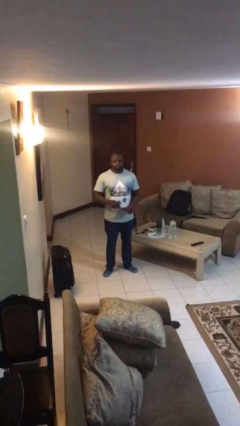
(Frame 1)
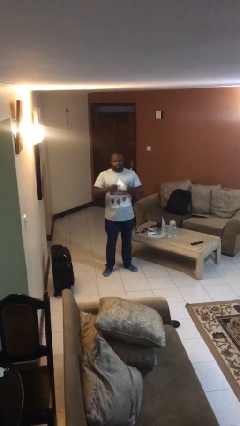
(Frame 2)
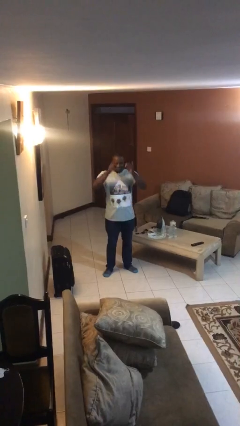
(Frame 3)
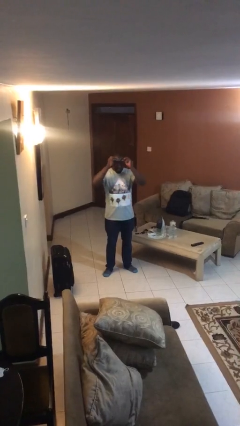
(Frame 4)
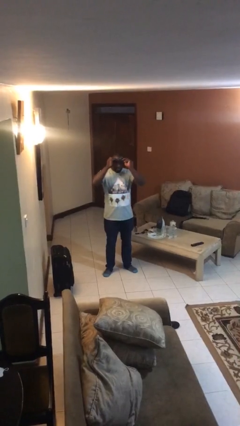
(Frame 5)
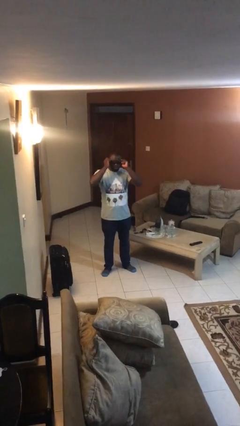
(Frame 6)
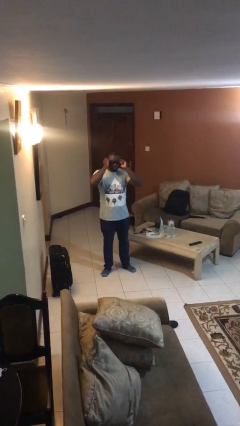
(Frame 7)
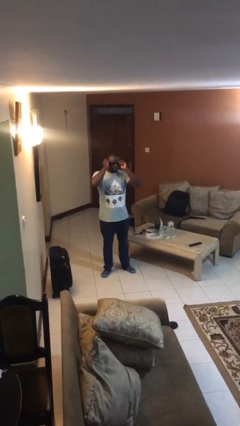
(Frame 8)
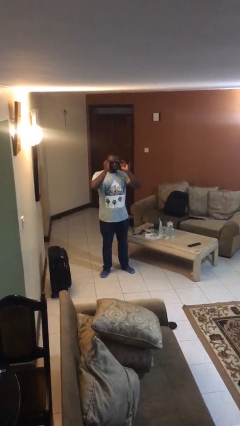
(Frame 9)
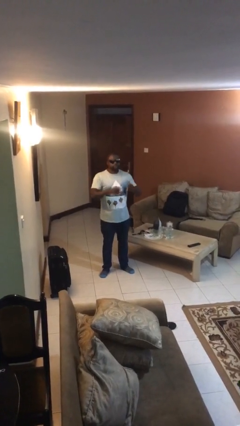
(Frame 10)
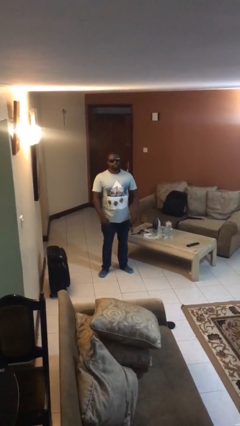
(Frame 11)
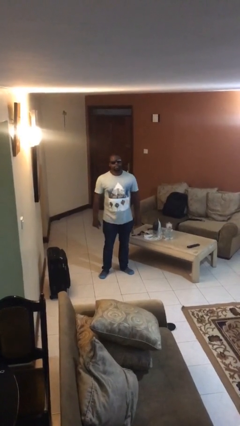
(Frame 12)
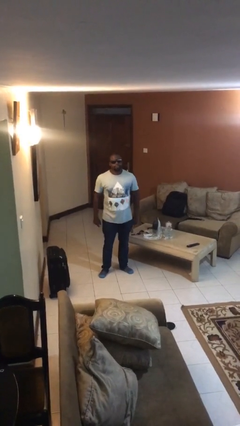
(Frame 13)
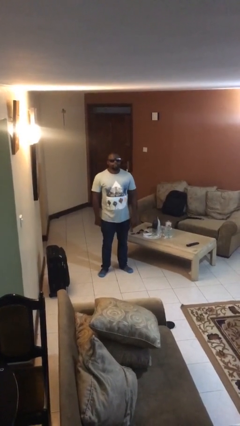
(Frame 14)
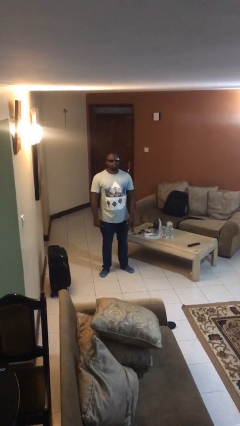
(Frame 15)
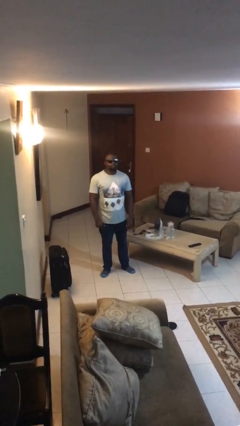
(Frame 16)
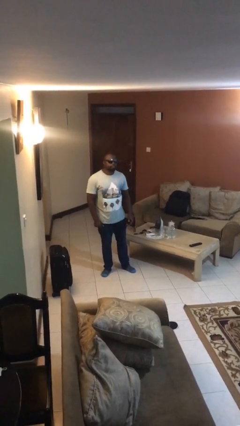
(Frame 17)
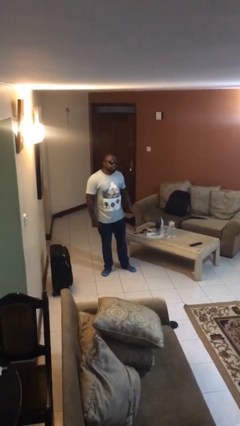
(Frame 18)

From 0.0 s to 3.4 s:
person puts on sunglasses

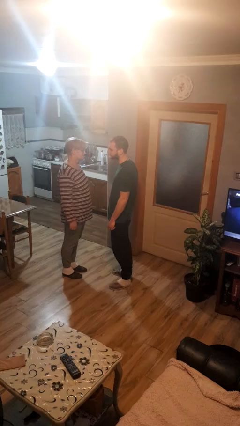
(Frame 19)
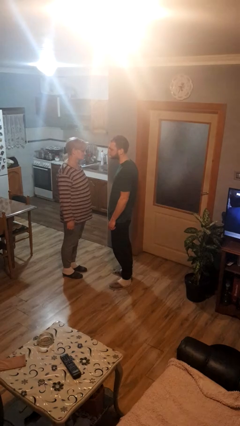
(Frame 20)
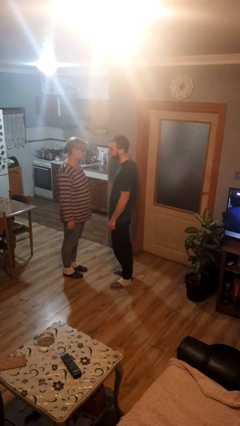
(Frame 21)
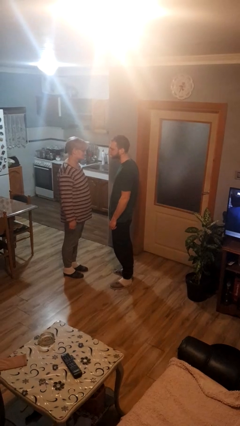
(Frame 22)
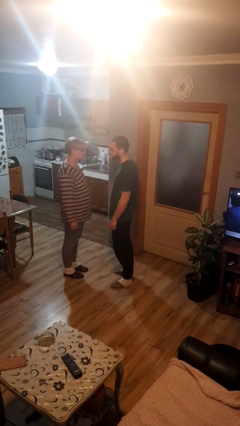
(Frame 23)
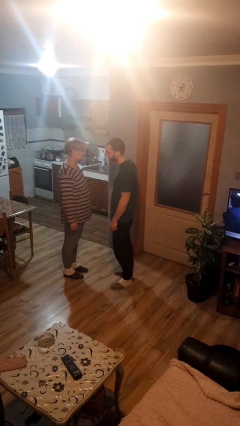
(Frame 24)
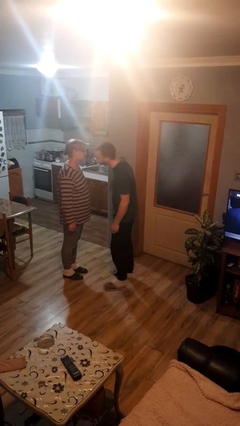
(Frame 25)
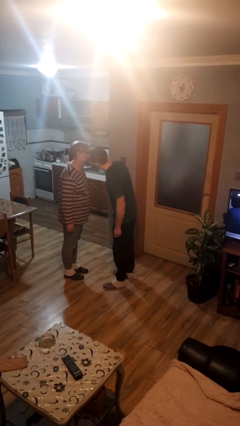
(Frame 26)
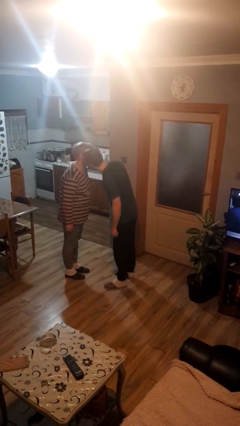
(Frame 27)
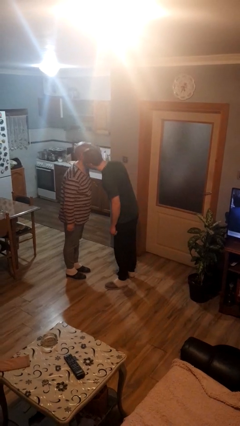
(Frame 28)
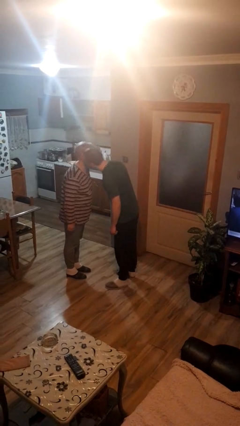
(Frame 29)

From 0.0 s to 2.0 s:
person kisses cheek of person

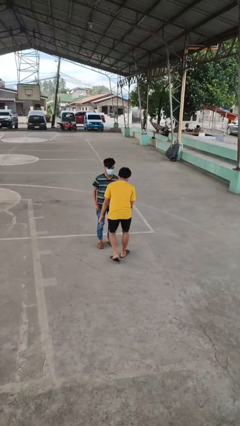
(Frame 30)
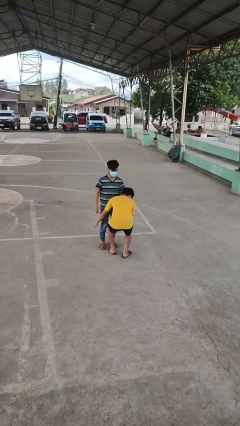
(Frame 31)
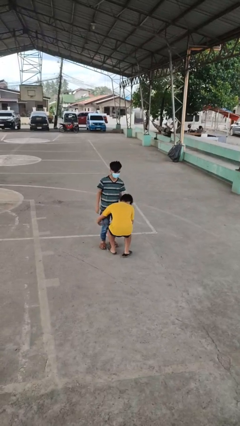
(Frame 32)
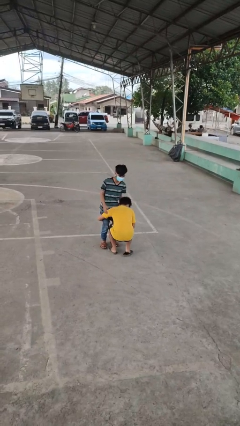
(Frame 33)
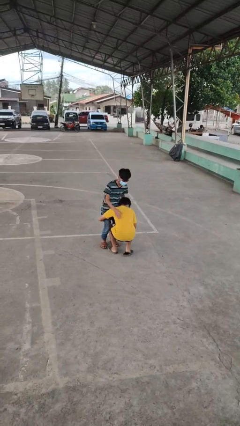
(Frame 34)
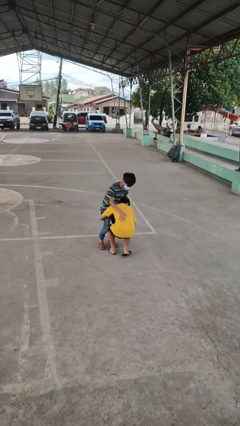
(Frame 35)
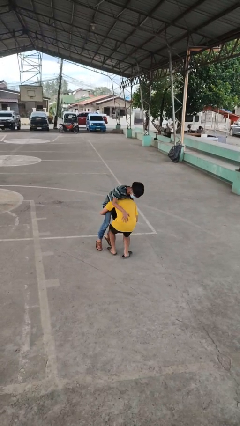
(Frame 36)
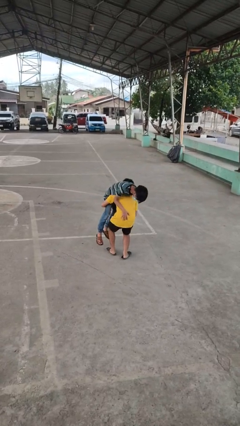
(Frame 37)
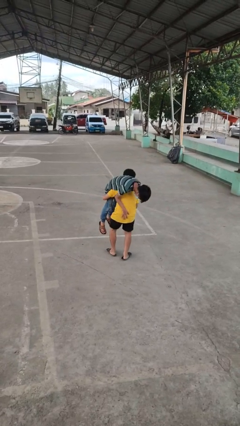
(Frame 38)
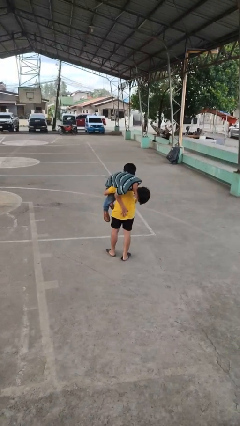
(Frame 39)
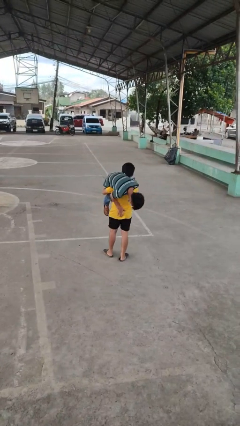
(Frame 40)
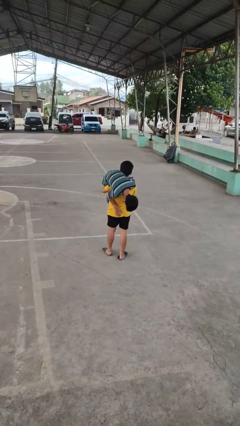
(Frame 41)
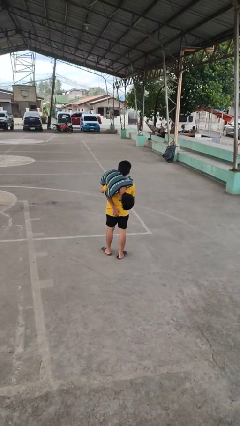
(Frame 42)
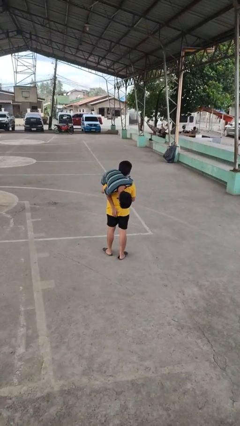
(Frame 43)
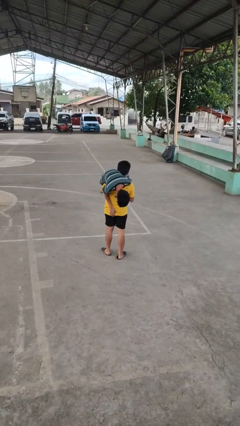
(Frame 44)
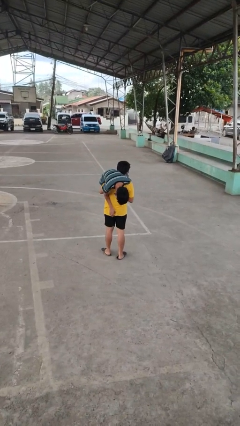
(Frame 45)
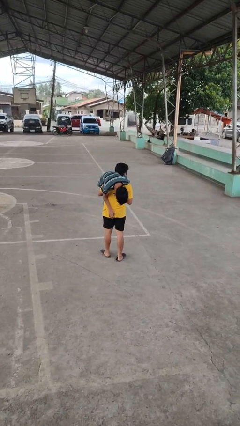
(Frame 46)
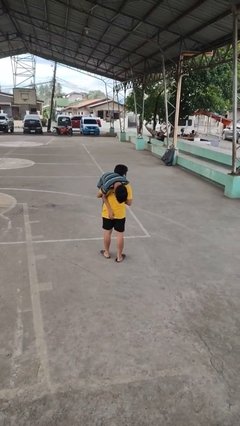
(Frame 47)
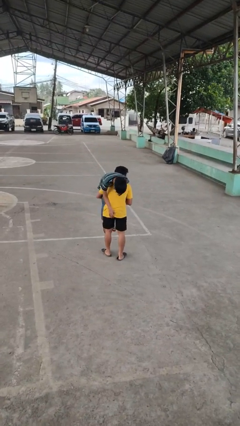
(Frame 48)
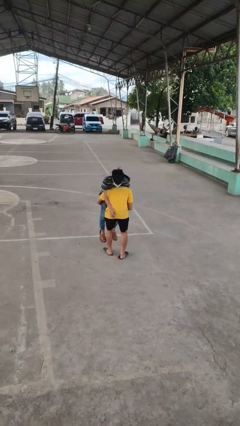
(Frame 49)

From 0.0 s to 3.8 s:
person carries person over shoulder

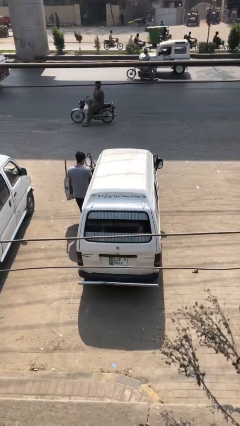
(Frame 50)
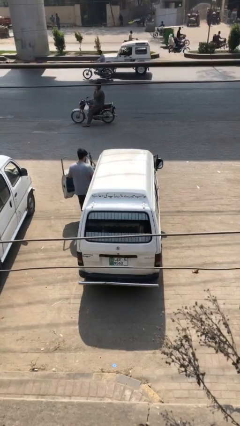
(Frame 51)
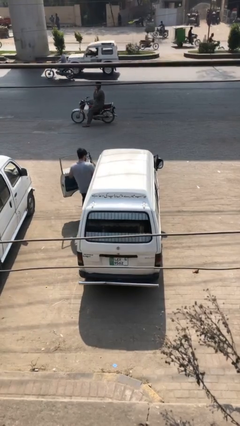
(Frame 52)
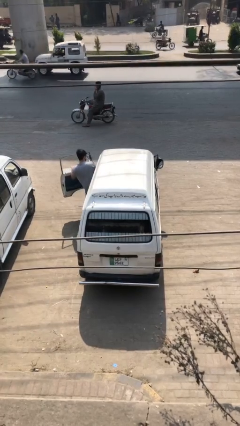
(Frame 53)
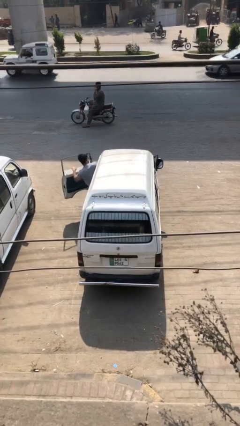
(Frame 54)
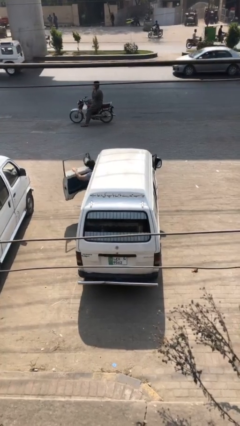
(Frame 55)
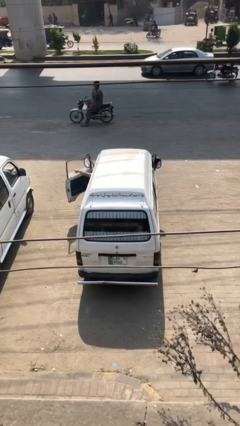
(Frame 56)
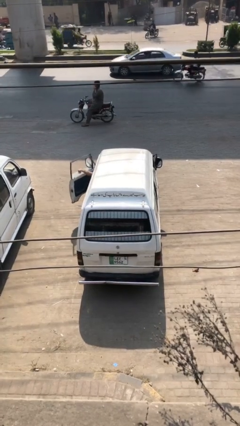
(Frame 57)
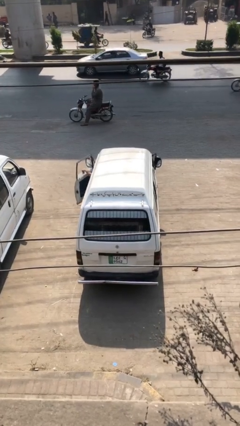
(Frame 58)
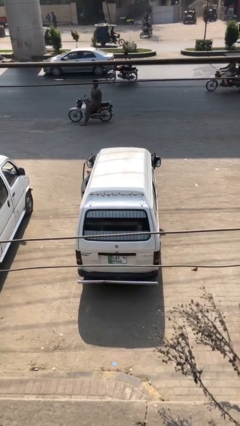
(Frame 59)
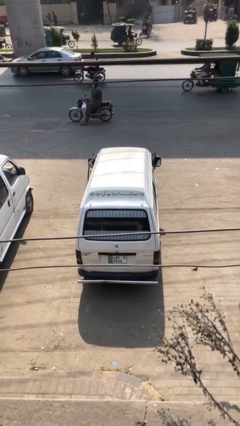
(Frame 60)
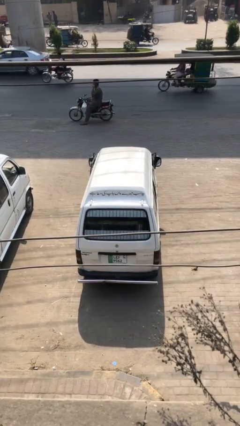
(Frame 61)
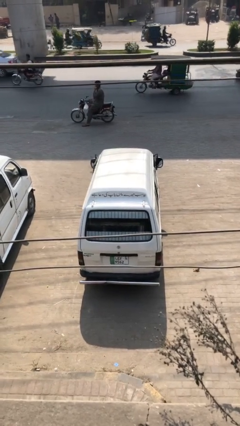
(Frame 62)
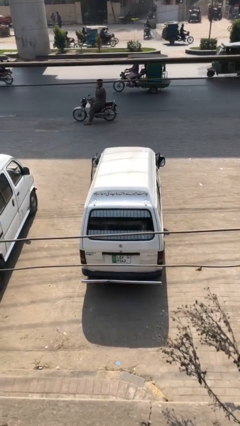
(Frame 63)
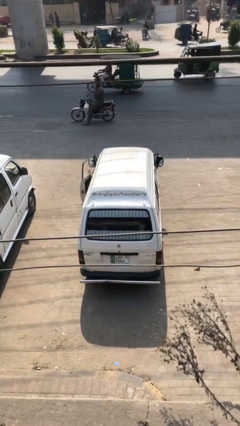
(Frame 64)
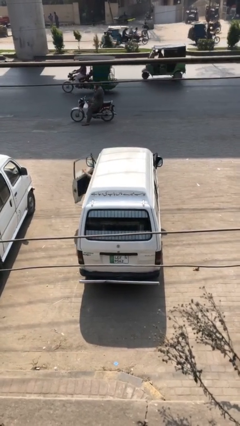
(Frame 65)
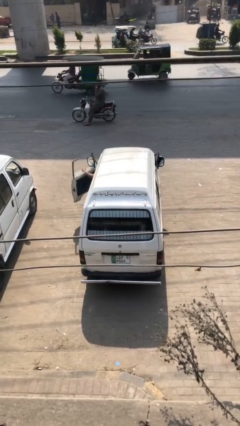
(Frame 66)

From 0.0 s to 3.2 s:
car picks up person

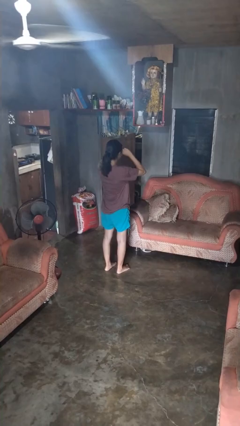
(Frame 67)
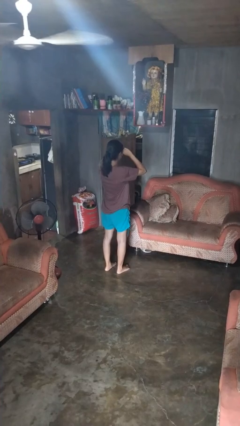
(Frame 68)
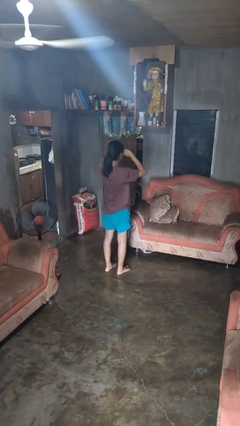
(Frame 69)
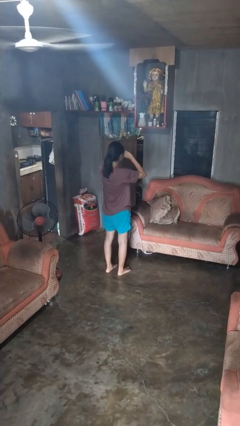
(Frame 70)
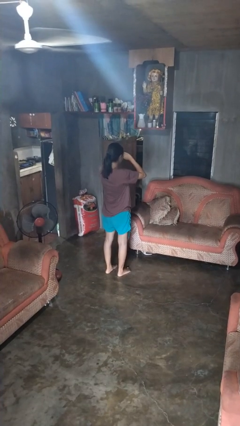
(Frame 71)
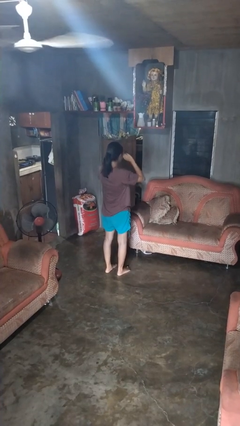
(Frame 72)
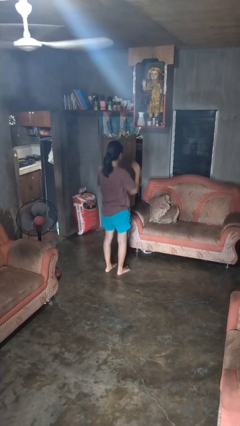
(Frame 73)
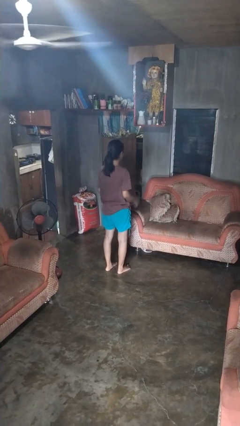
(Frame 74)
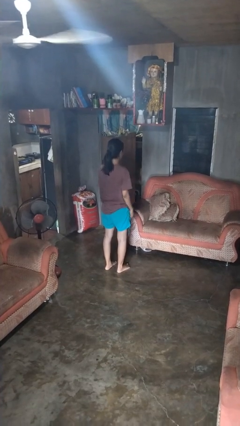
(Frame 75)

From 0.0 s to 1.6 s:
person rubs eyes

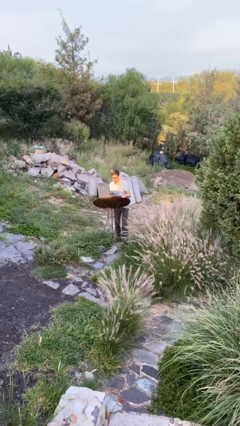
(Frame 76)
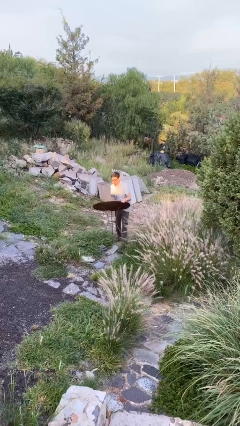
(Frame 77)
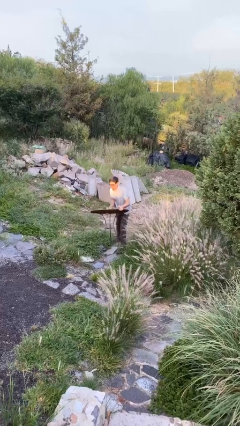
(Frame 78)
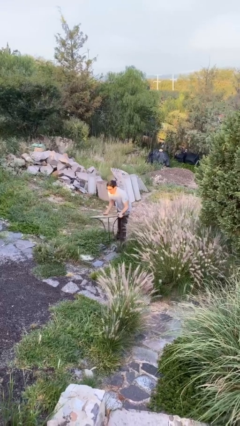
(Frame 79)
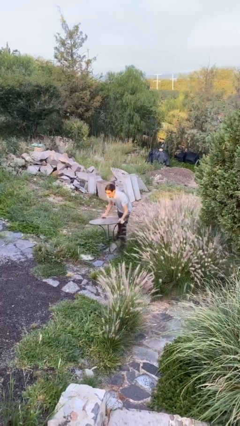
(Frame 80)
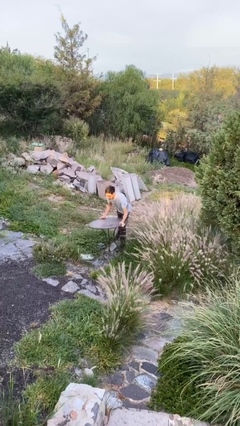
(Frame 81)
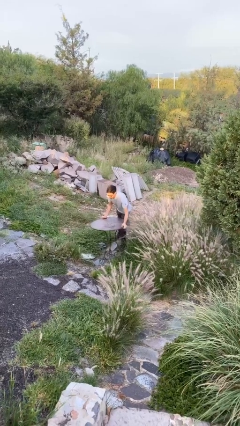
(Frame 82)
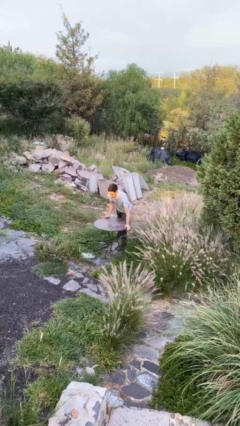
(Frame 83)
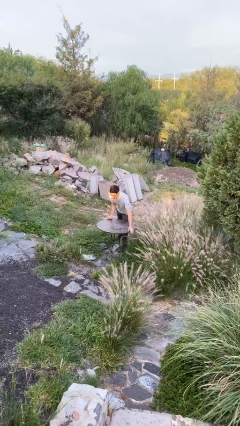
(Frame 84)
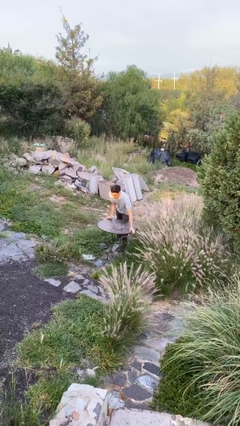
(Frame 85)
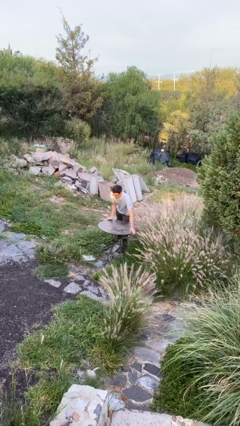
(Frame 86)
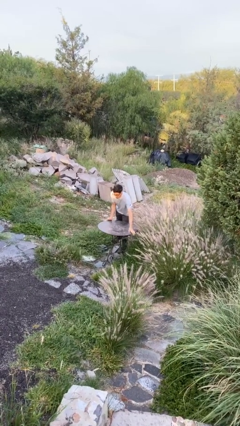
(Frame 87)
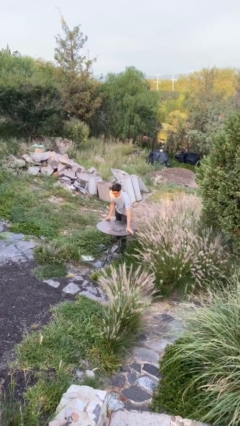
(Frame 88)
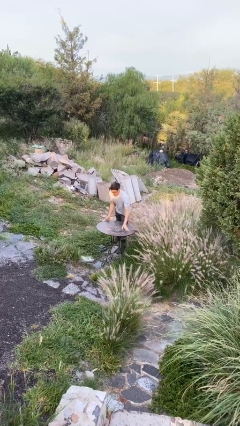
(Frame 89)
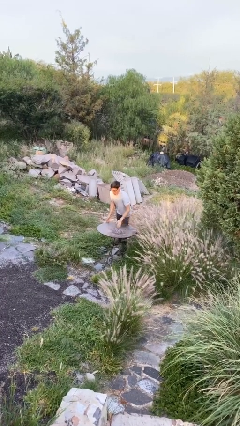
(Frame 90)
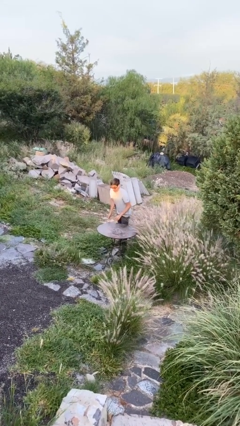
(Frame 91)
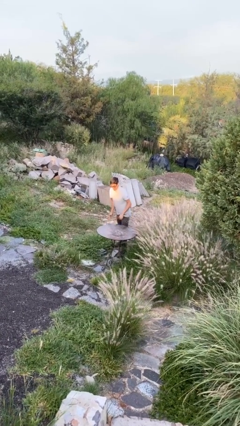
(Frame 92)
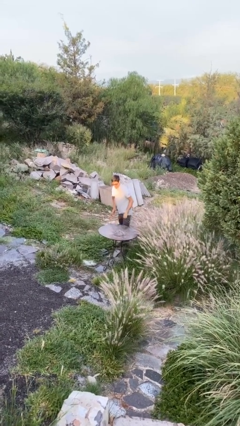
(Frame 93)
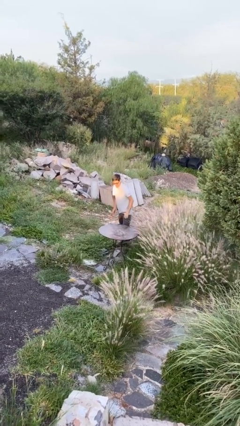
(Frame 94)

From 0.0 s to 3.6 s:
person puts down object on floor
